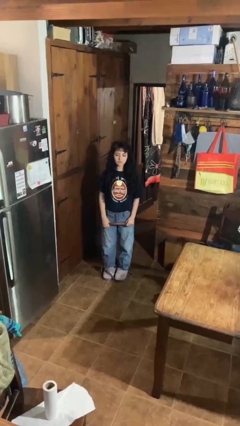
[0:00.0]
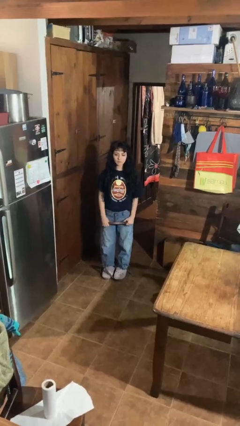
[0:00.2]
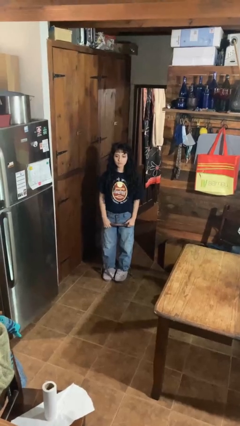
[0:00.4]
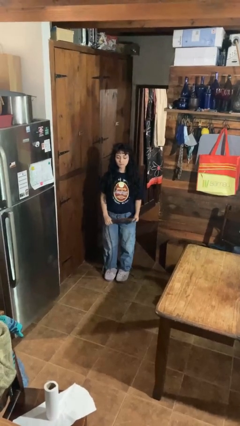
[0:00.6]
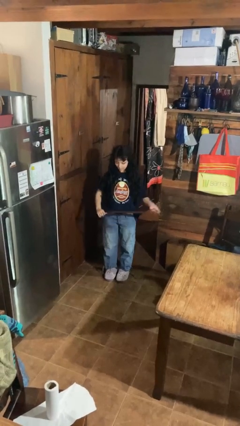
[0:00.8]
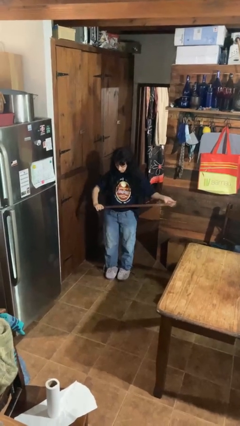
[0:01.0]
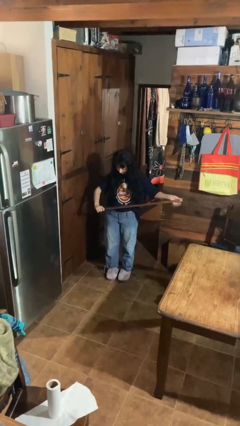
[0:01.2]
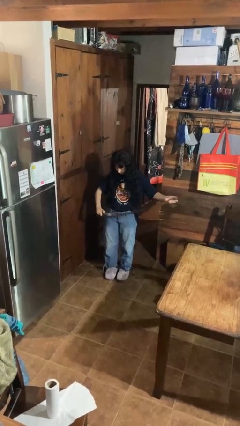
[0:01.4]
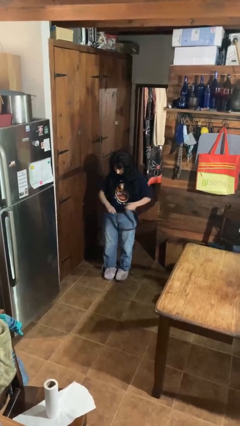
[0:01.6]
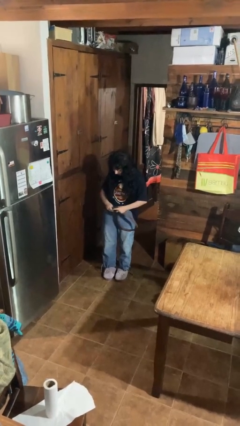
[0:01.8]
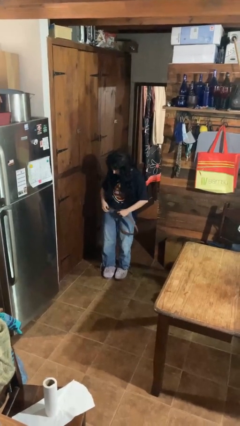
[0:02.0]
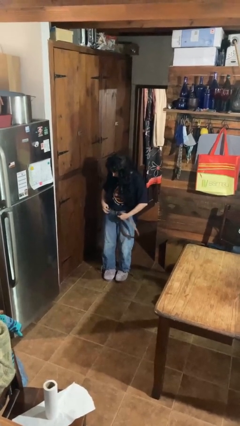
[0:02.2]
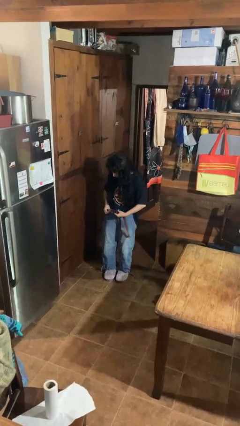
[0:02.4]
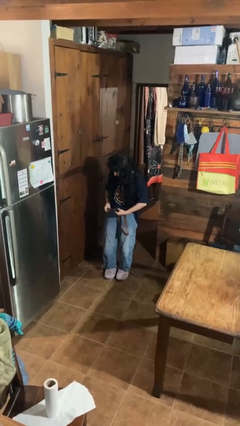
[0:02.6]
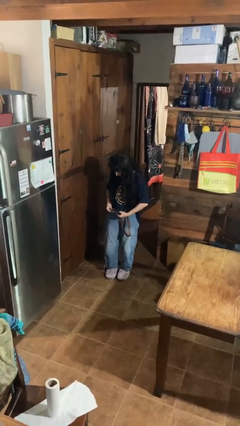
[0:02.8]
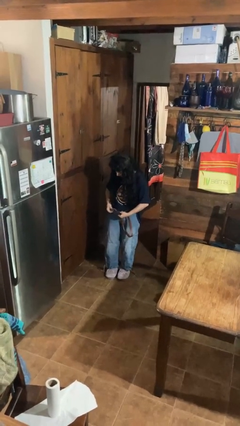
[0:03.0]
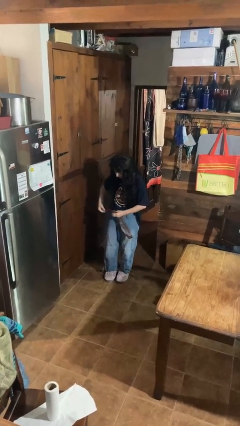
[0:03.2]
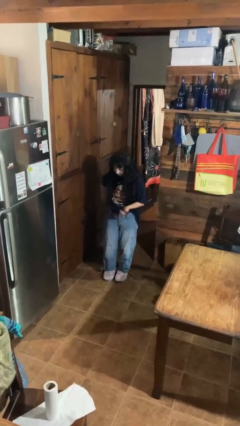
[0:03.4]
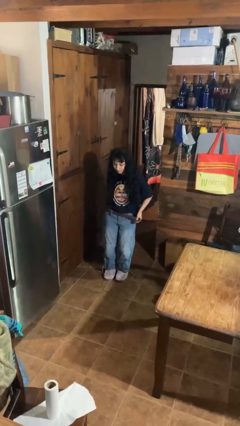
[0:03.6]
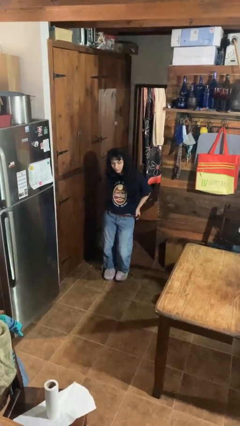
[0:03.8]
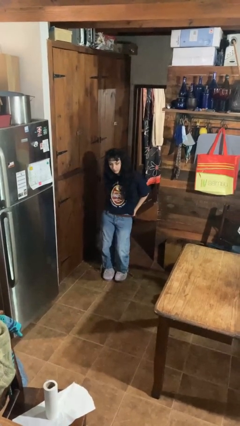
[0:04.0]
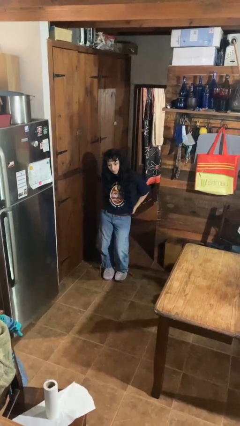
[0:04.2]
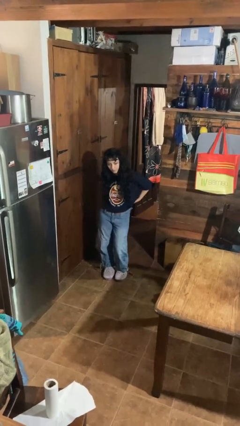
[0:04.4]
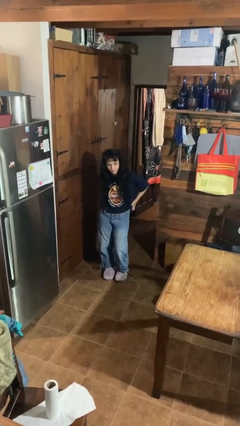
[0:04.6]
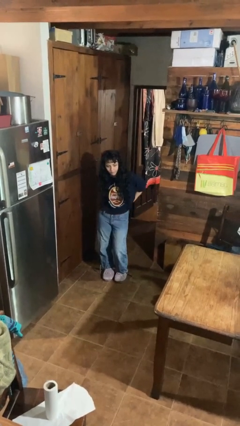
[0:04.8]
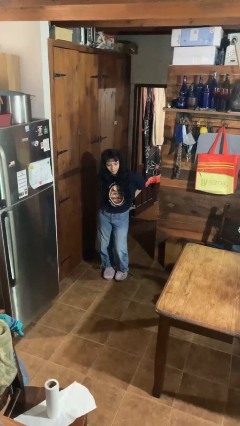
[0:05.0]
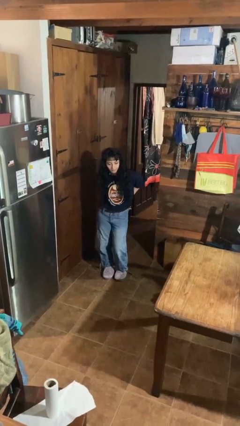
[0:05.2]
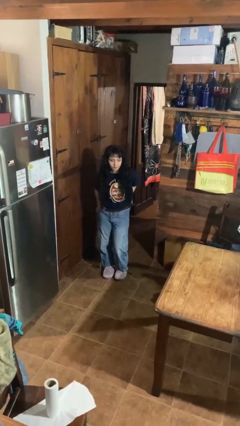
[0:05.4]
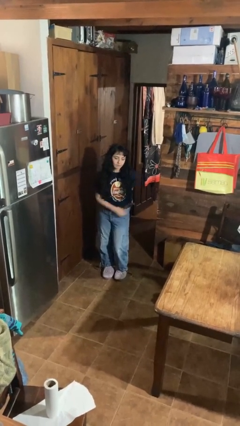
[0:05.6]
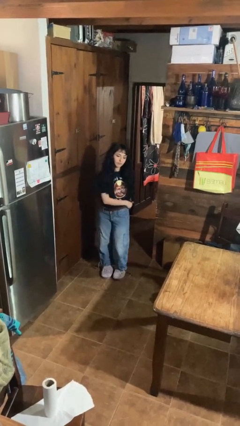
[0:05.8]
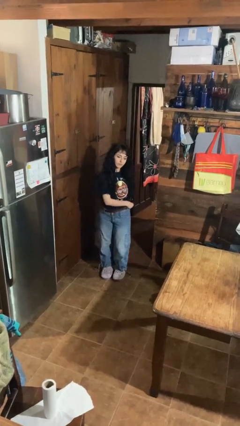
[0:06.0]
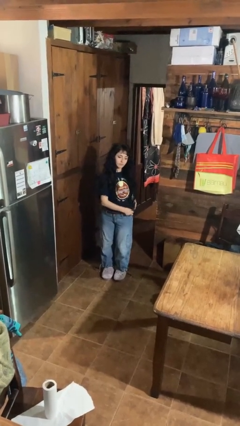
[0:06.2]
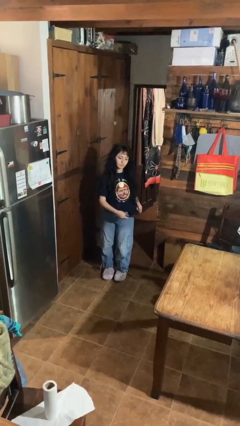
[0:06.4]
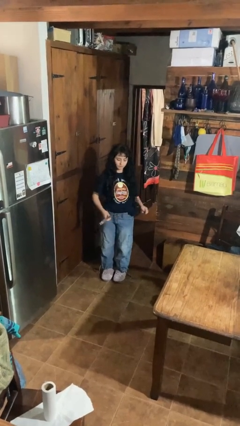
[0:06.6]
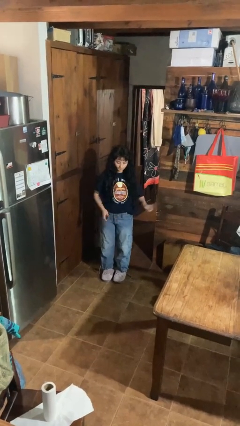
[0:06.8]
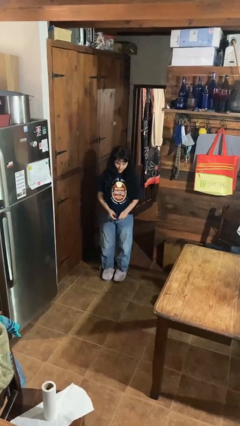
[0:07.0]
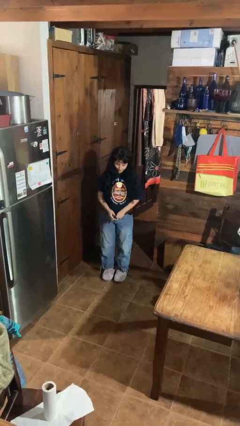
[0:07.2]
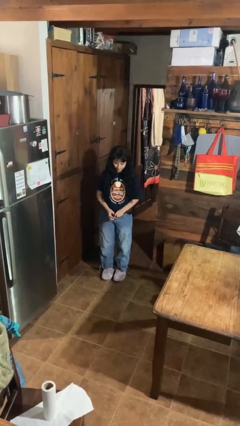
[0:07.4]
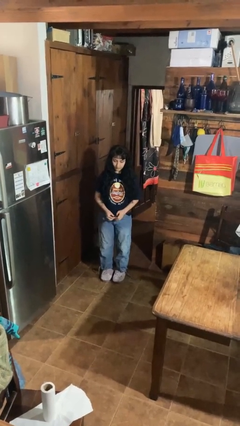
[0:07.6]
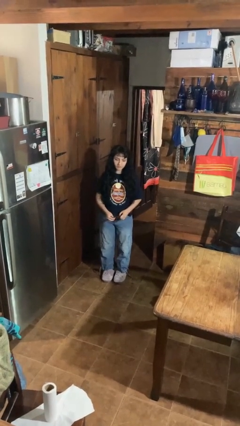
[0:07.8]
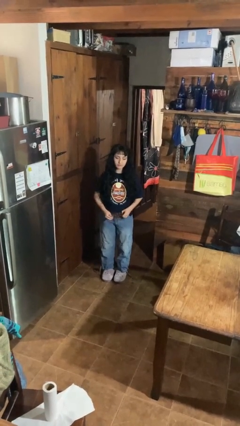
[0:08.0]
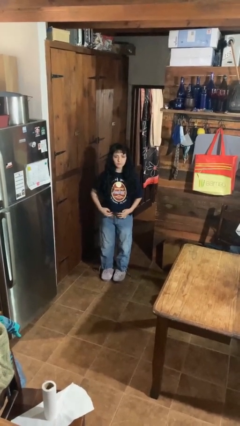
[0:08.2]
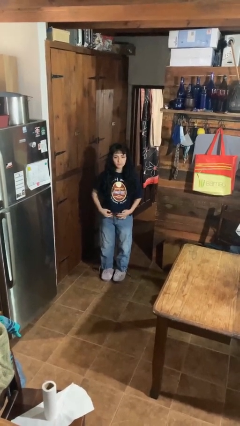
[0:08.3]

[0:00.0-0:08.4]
person puts on belt

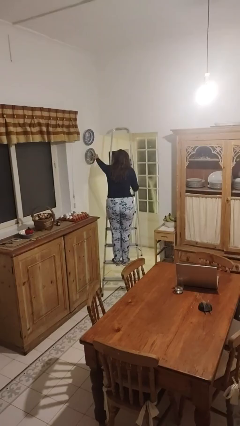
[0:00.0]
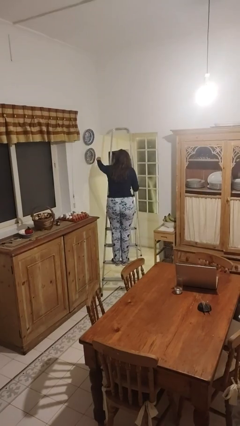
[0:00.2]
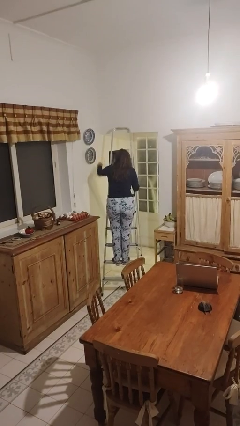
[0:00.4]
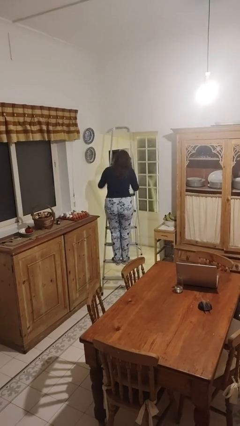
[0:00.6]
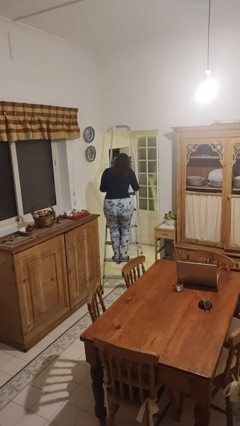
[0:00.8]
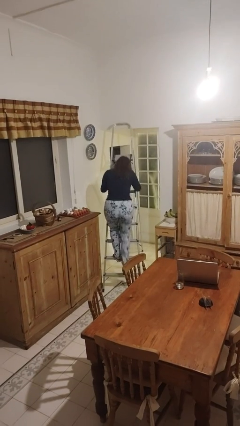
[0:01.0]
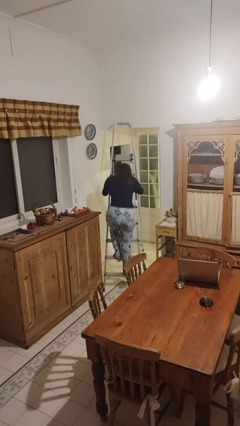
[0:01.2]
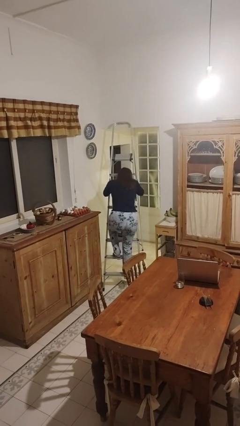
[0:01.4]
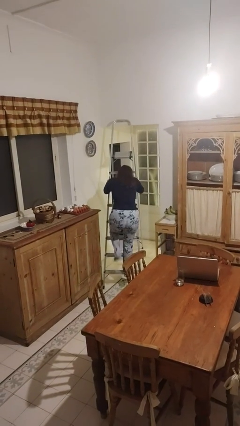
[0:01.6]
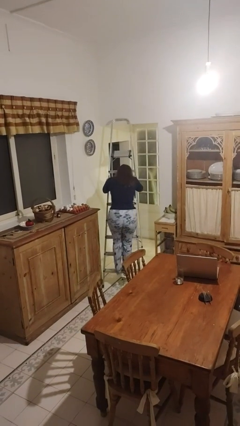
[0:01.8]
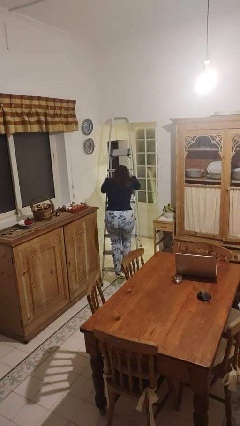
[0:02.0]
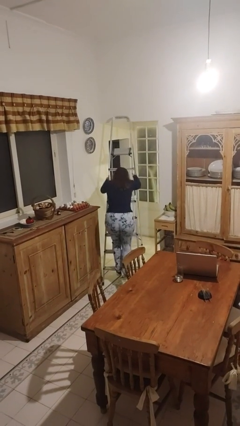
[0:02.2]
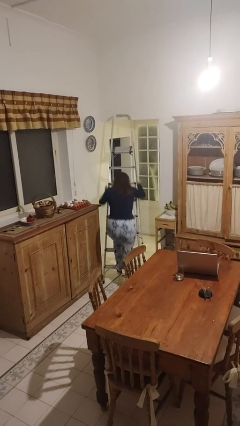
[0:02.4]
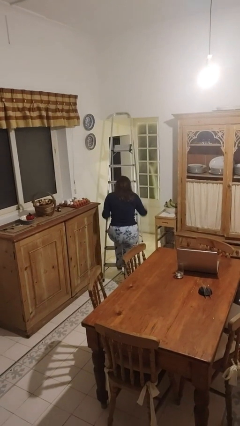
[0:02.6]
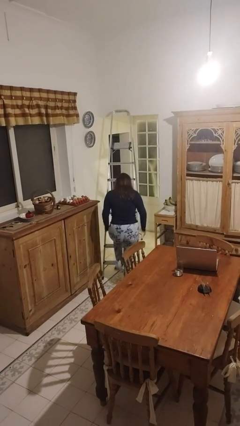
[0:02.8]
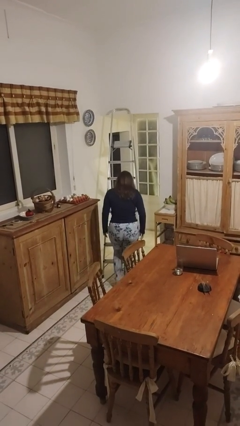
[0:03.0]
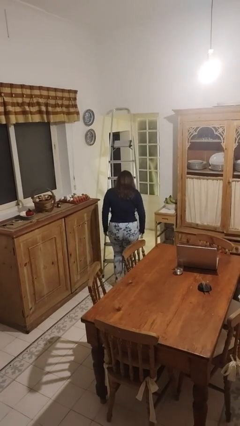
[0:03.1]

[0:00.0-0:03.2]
person climbs down ladder

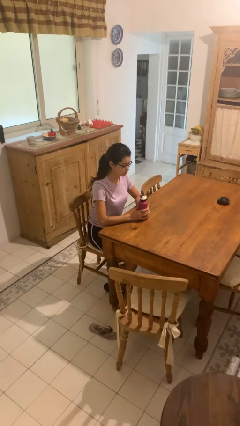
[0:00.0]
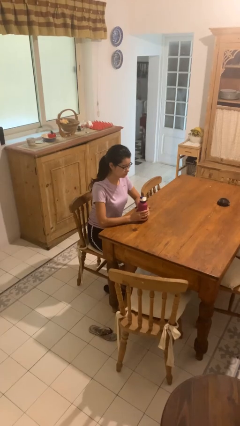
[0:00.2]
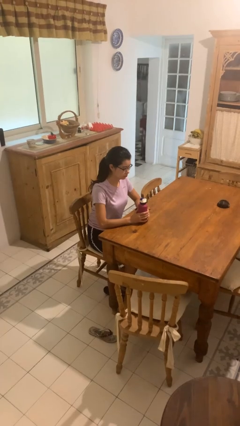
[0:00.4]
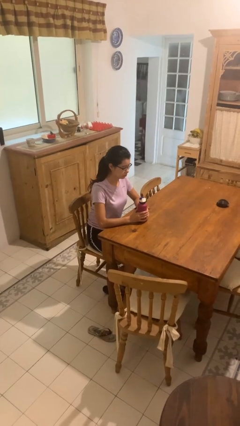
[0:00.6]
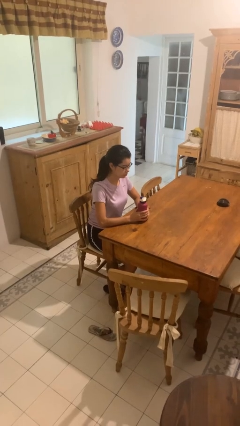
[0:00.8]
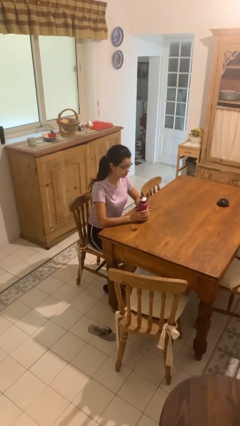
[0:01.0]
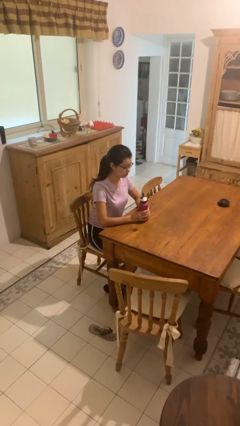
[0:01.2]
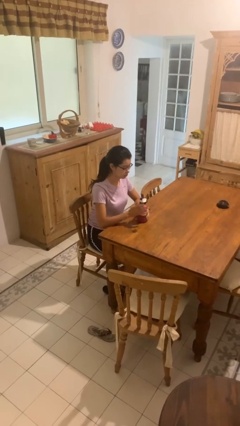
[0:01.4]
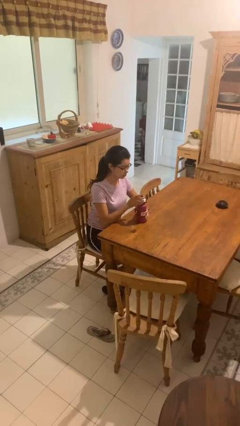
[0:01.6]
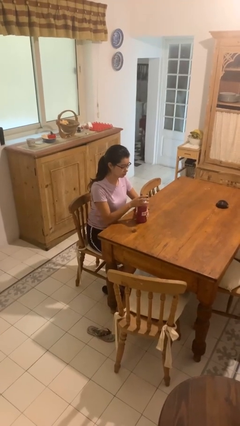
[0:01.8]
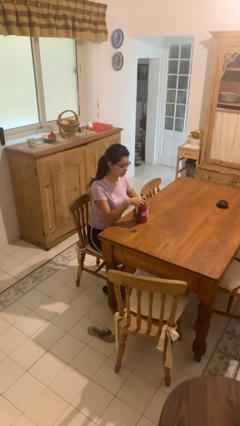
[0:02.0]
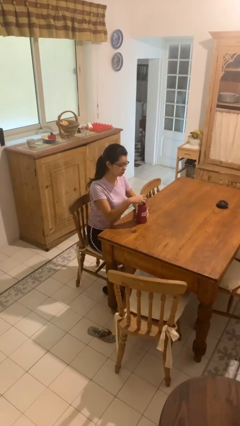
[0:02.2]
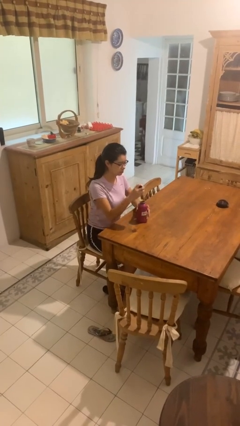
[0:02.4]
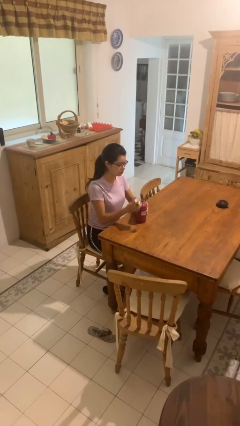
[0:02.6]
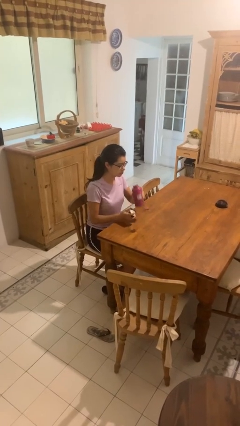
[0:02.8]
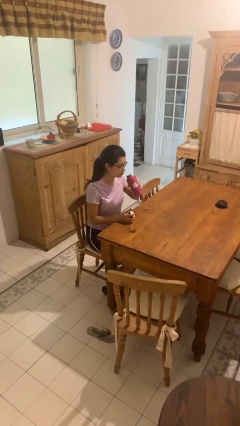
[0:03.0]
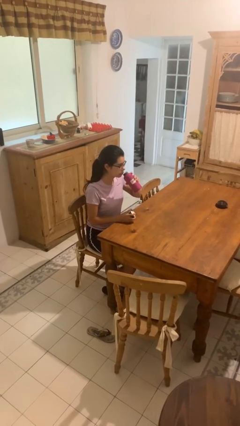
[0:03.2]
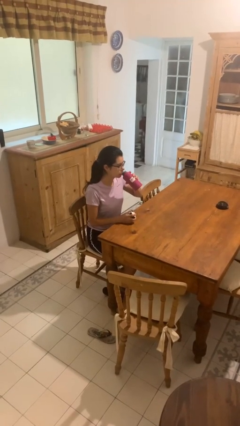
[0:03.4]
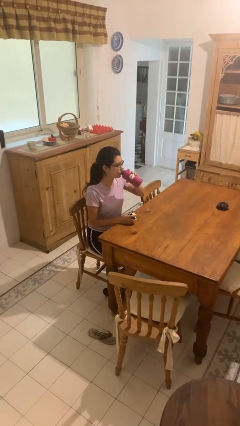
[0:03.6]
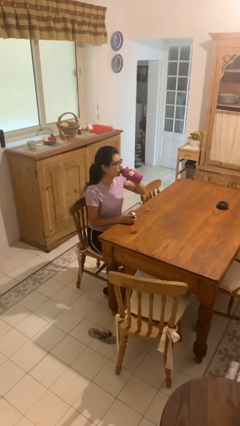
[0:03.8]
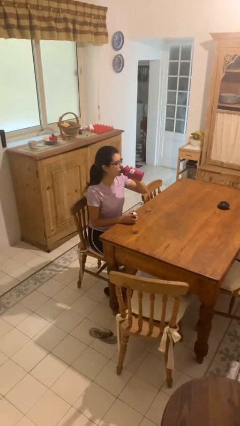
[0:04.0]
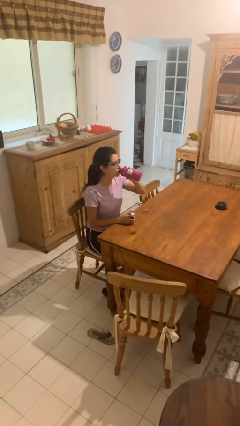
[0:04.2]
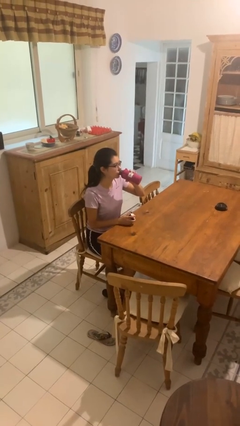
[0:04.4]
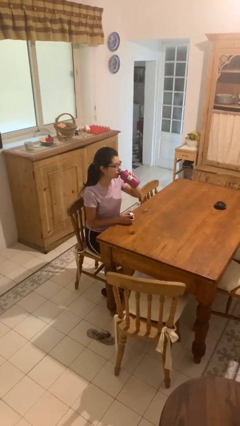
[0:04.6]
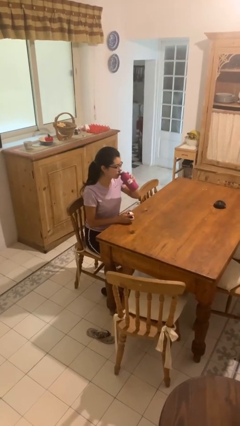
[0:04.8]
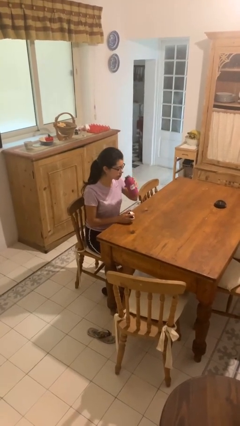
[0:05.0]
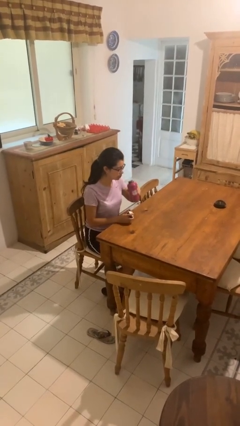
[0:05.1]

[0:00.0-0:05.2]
person drinks from bottle

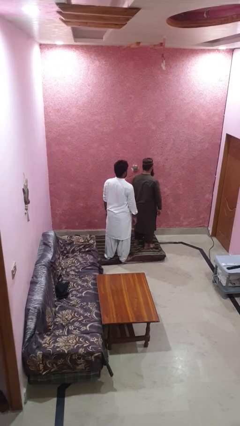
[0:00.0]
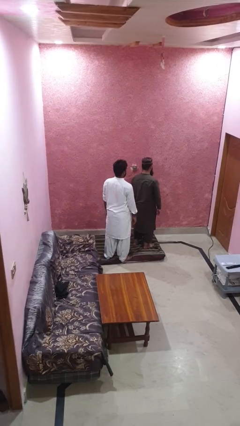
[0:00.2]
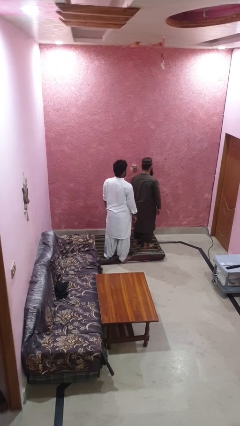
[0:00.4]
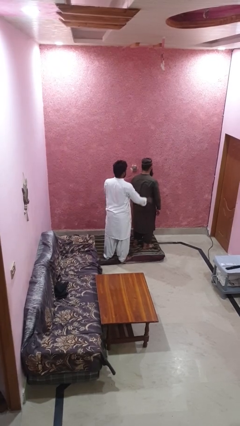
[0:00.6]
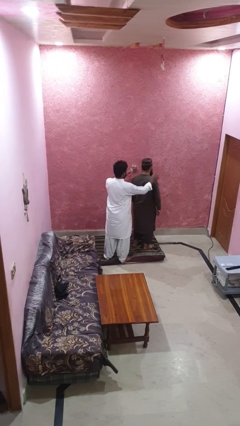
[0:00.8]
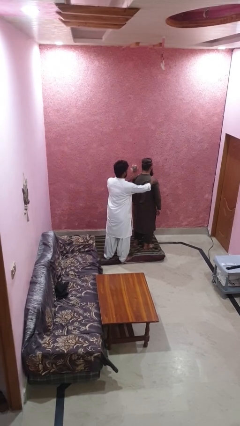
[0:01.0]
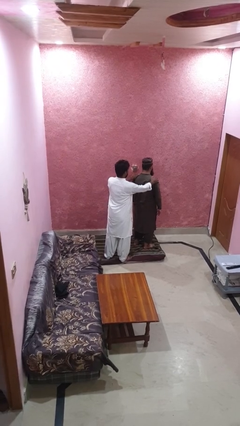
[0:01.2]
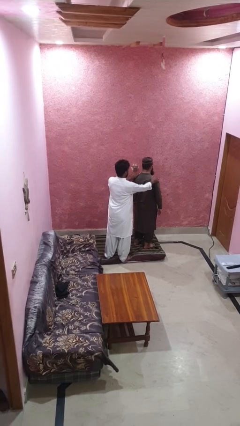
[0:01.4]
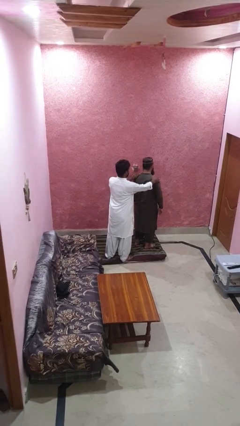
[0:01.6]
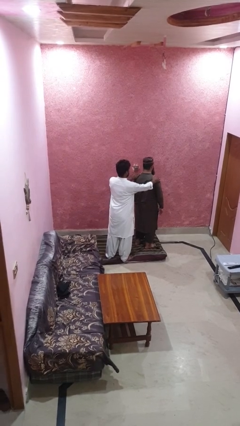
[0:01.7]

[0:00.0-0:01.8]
person grabs person by shoulder
